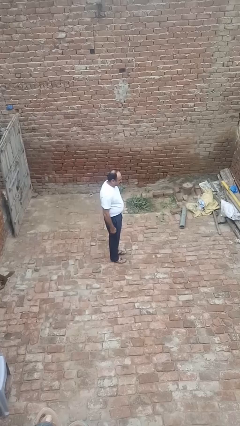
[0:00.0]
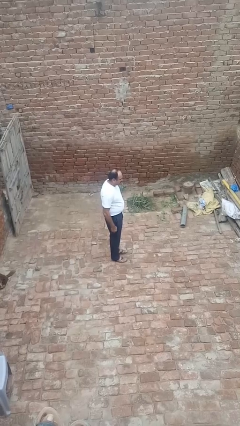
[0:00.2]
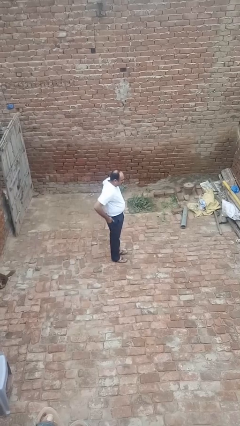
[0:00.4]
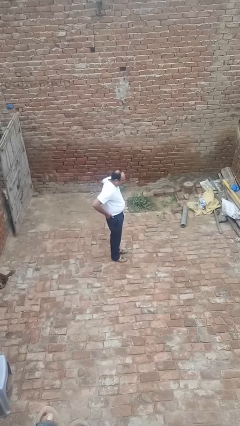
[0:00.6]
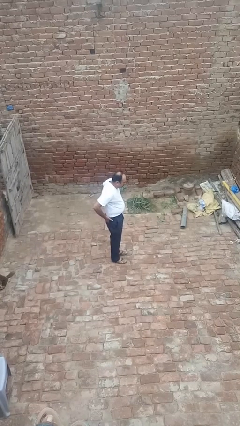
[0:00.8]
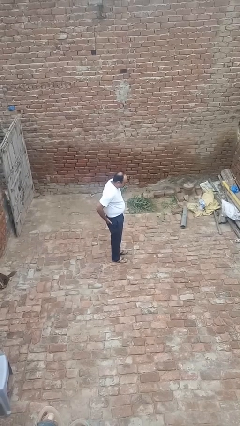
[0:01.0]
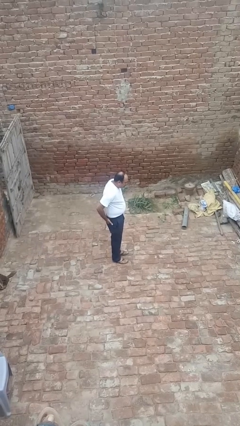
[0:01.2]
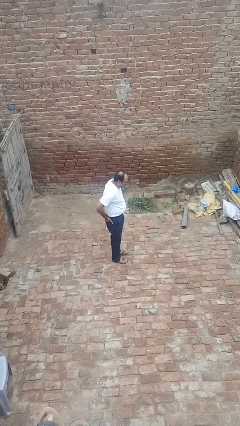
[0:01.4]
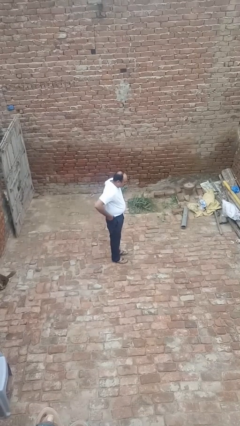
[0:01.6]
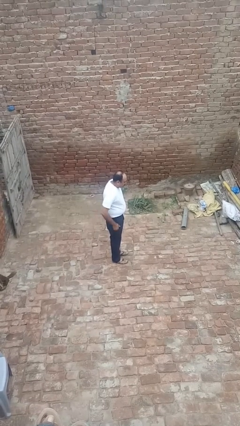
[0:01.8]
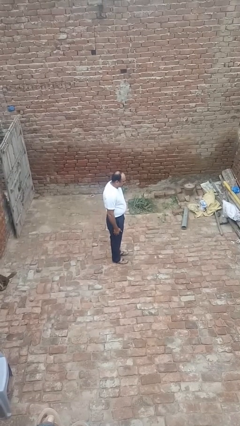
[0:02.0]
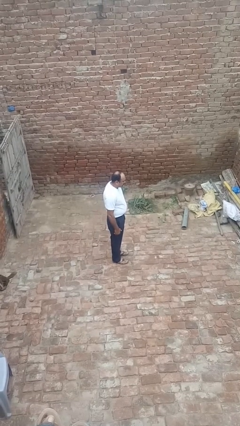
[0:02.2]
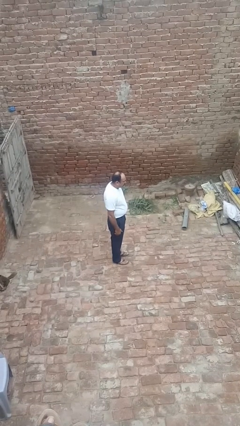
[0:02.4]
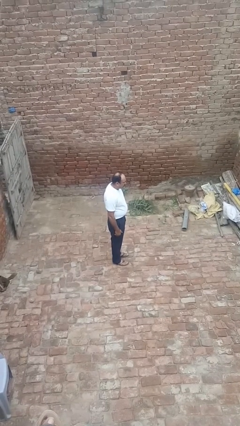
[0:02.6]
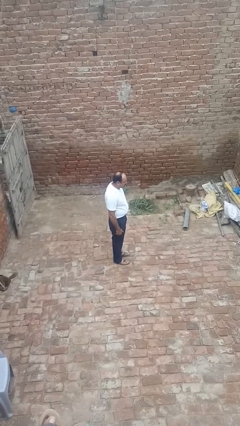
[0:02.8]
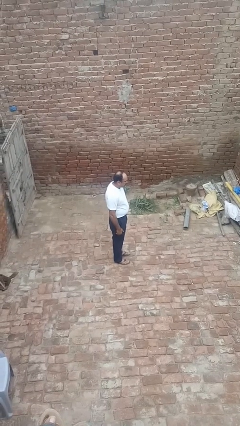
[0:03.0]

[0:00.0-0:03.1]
person puts hands in back pockets

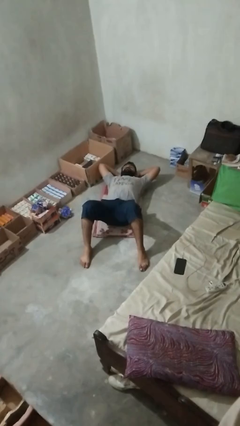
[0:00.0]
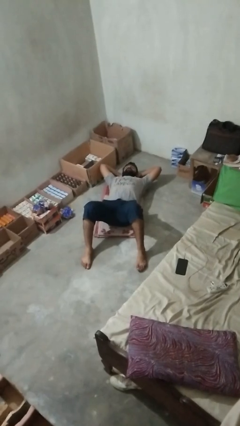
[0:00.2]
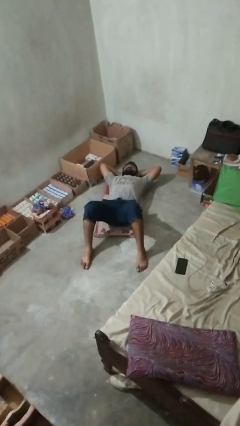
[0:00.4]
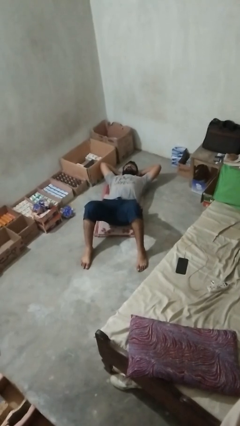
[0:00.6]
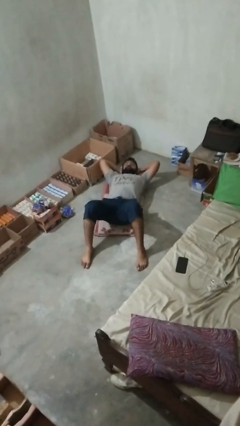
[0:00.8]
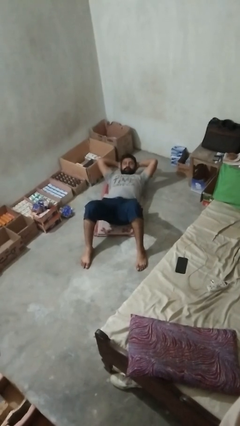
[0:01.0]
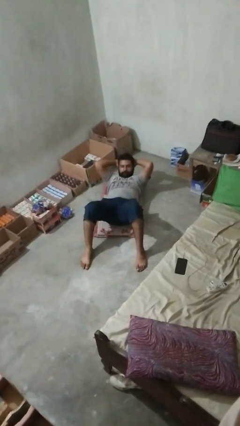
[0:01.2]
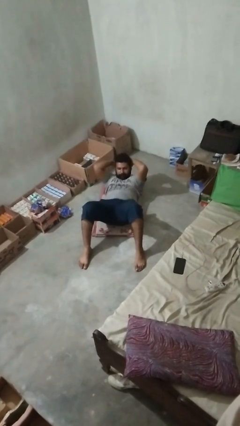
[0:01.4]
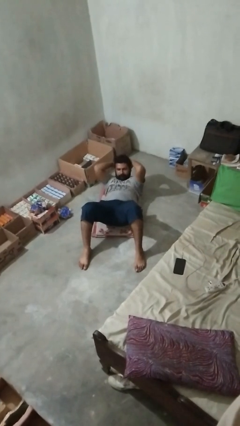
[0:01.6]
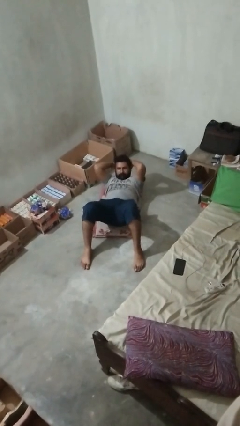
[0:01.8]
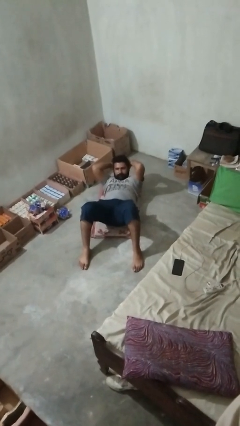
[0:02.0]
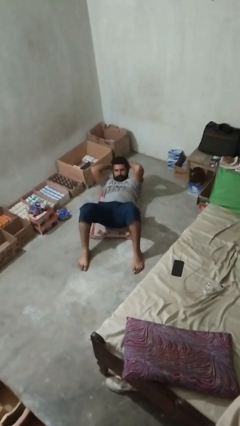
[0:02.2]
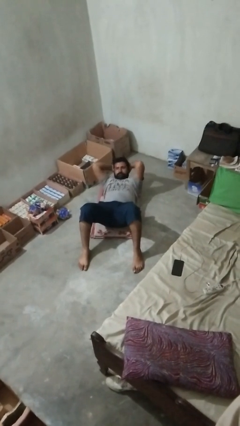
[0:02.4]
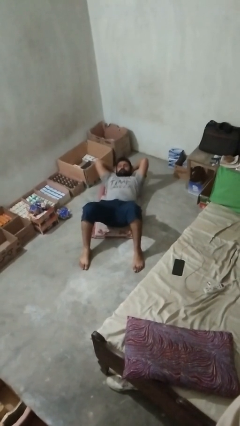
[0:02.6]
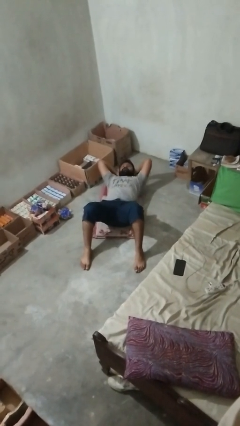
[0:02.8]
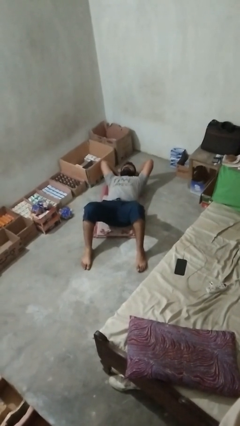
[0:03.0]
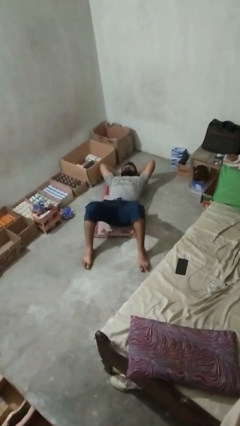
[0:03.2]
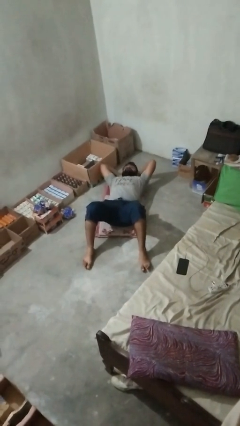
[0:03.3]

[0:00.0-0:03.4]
person exercises with situp

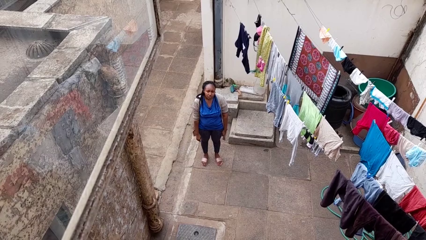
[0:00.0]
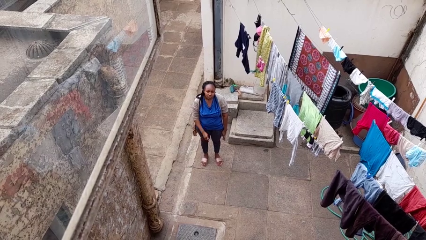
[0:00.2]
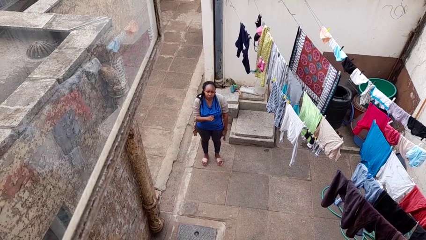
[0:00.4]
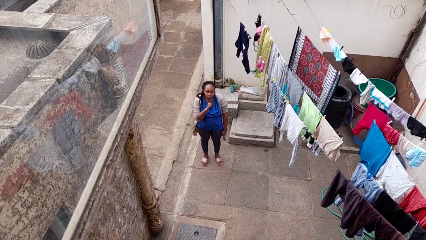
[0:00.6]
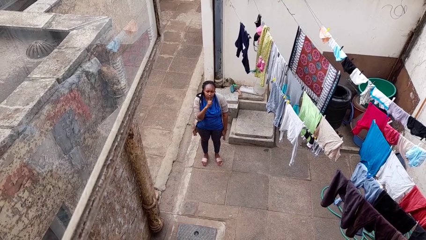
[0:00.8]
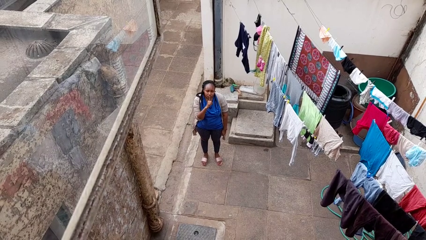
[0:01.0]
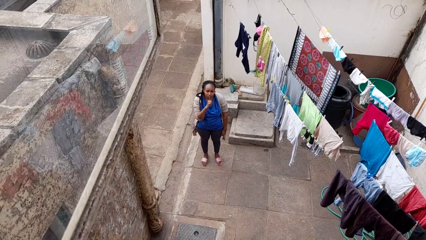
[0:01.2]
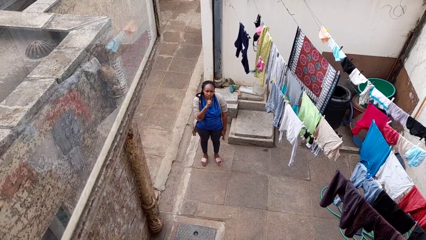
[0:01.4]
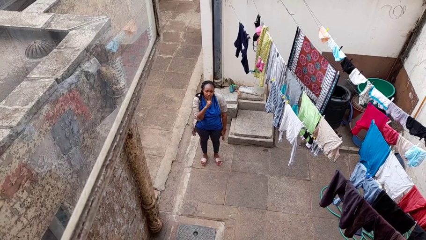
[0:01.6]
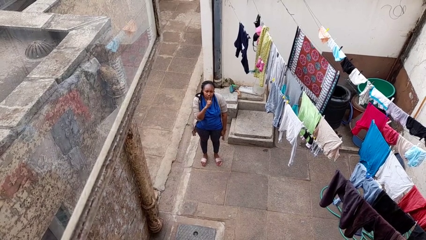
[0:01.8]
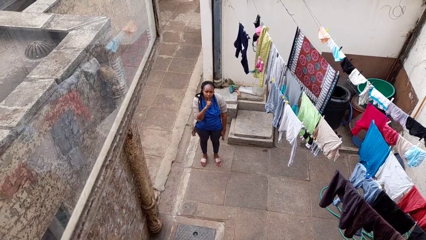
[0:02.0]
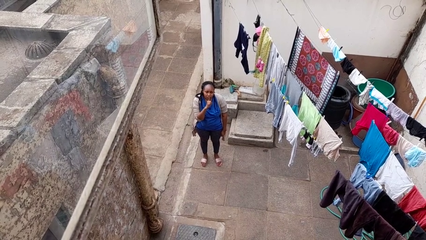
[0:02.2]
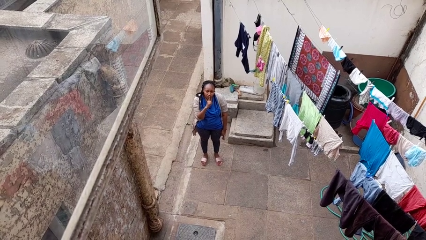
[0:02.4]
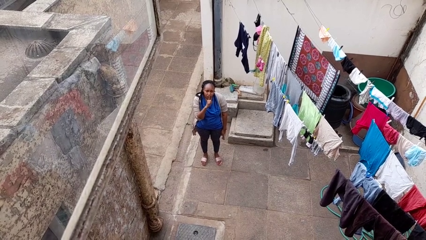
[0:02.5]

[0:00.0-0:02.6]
person gestures be quiet

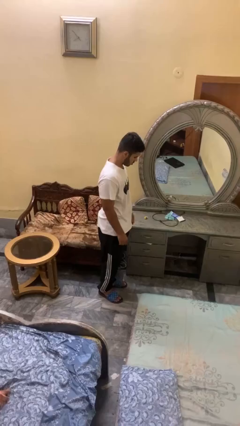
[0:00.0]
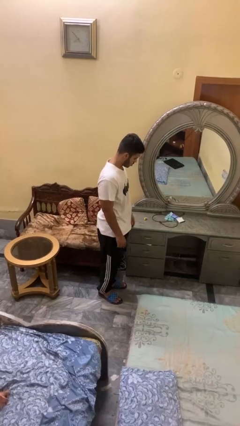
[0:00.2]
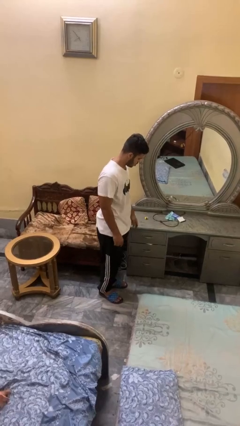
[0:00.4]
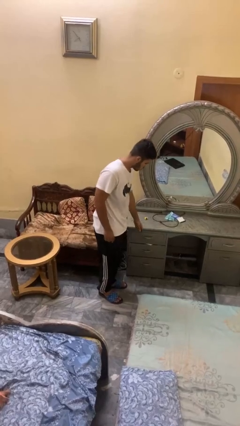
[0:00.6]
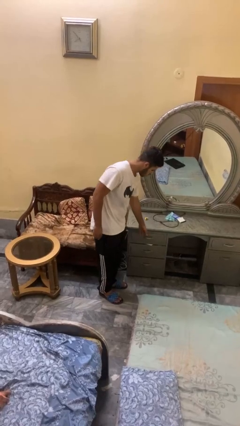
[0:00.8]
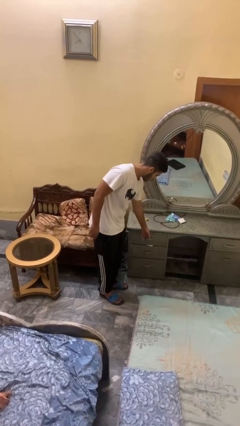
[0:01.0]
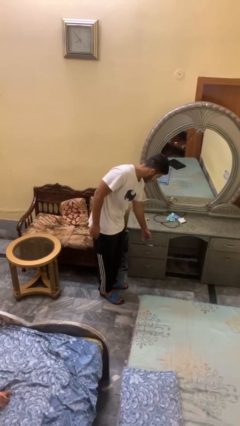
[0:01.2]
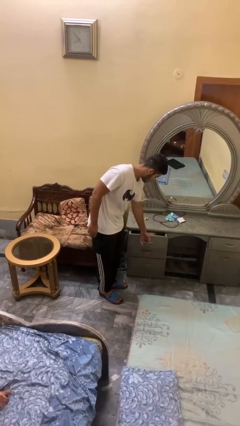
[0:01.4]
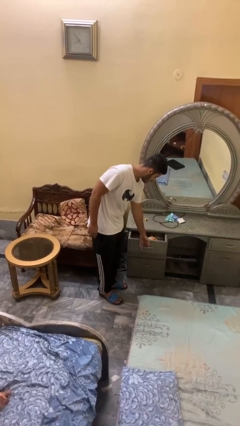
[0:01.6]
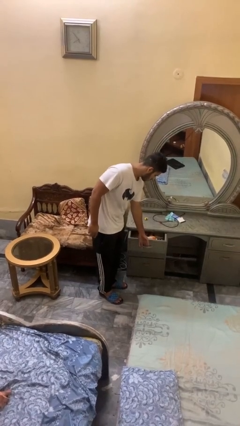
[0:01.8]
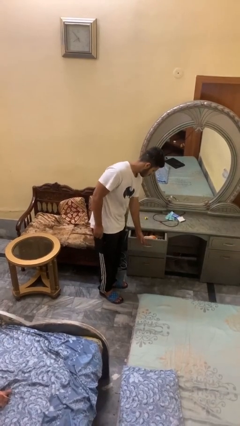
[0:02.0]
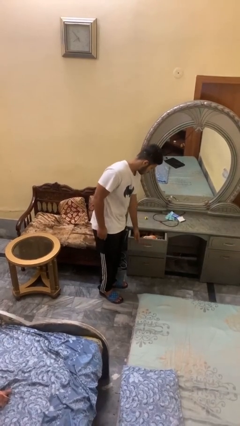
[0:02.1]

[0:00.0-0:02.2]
person opens dresser drawer

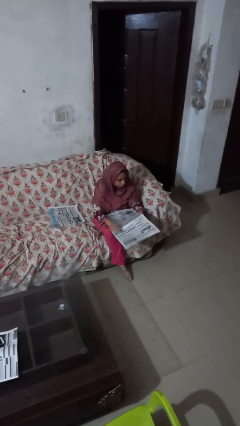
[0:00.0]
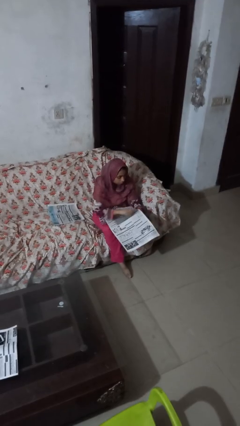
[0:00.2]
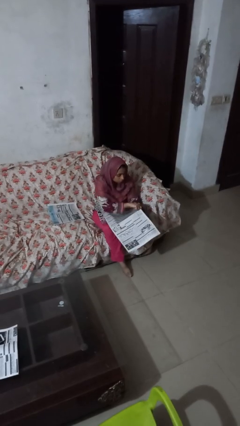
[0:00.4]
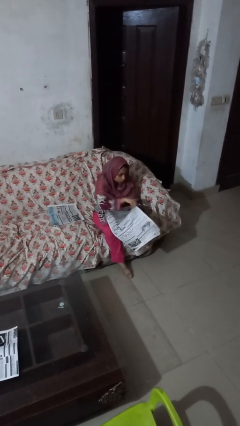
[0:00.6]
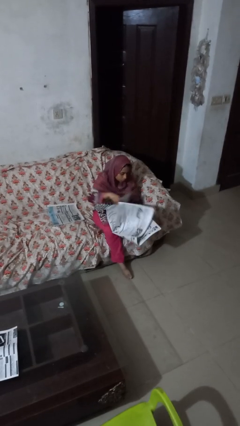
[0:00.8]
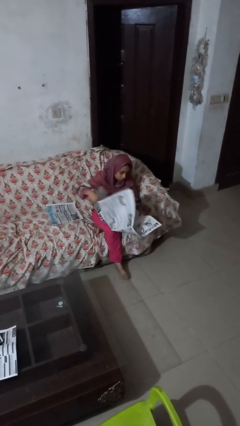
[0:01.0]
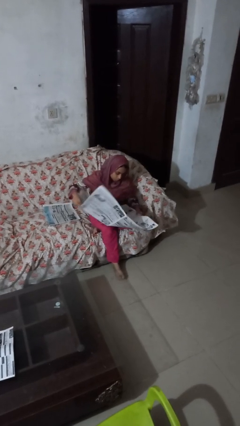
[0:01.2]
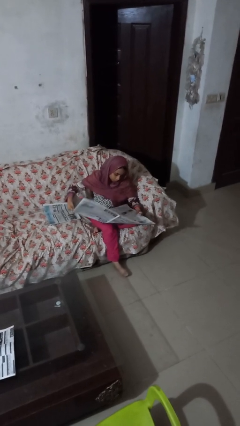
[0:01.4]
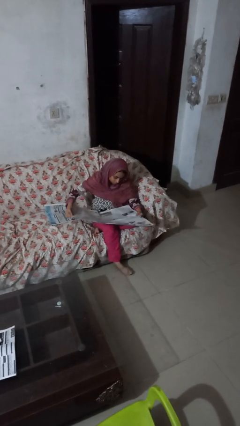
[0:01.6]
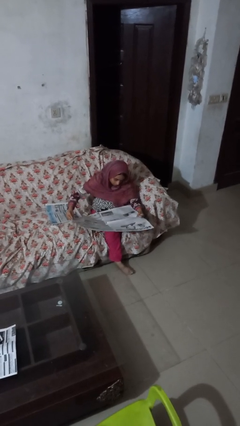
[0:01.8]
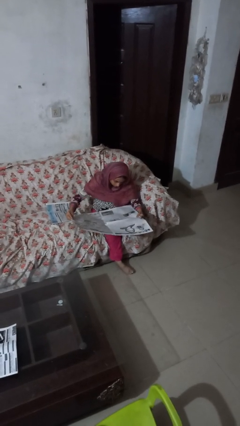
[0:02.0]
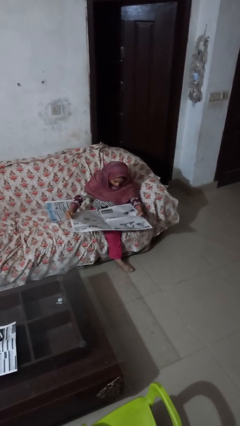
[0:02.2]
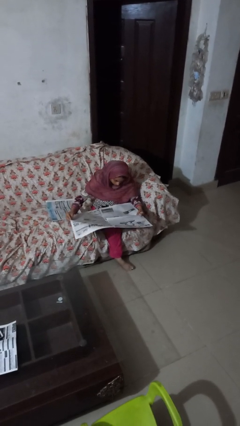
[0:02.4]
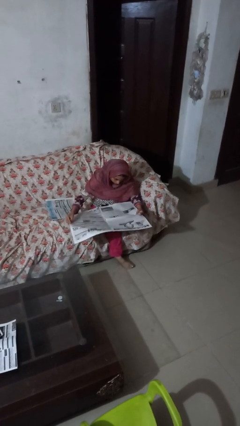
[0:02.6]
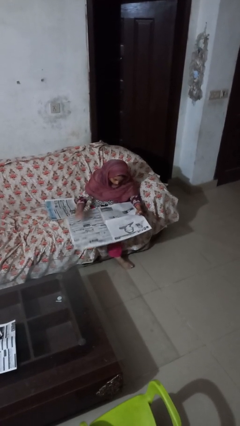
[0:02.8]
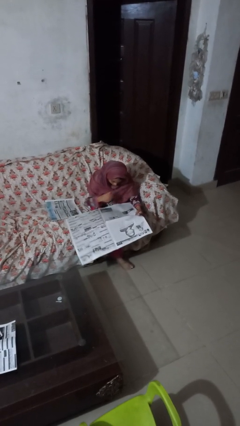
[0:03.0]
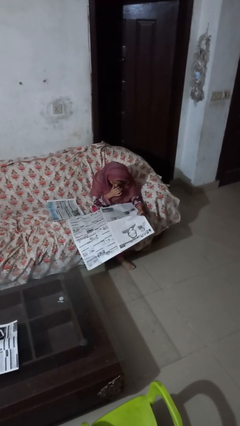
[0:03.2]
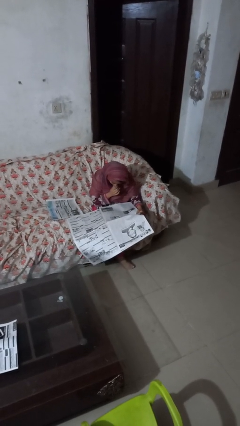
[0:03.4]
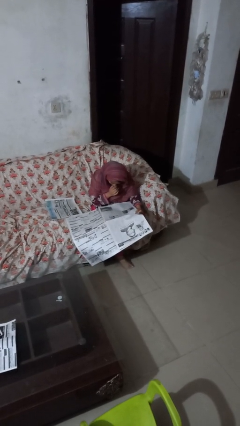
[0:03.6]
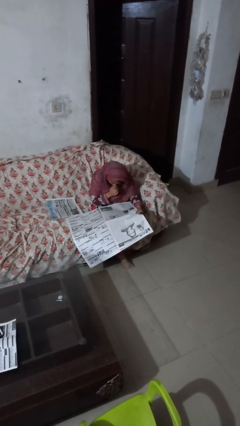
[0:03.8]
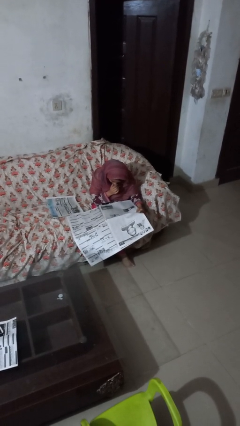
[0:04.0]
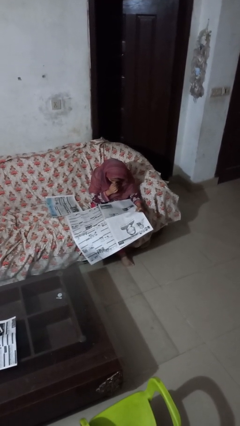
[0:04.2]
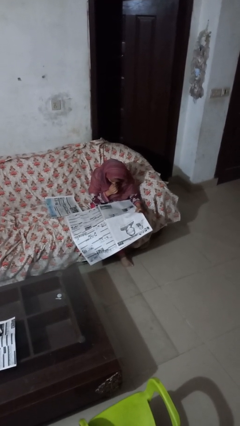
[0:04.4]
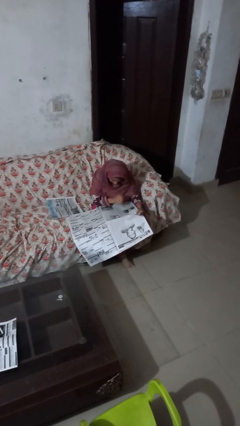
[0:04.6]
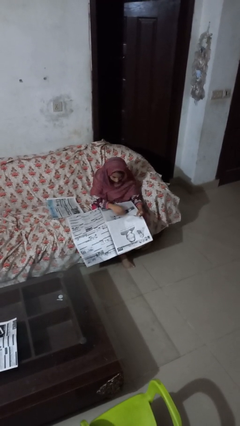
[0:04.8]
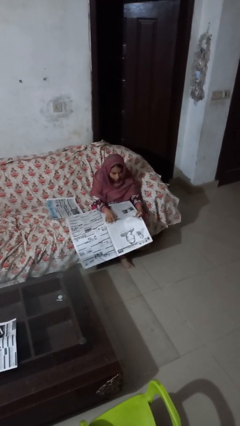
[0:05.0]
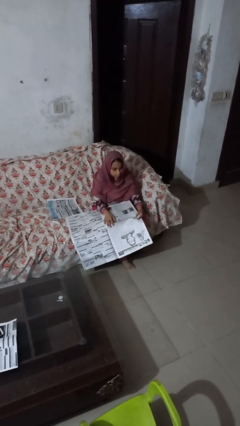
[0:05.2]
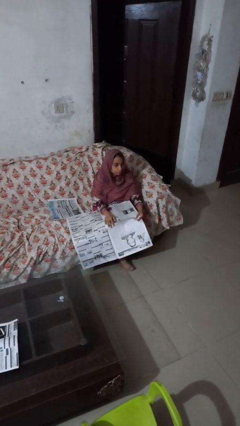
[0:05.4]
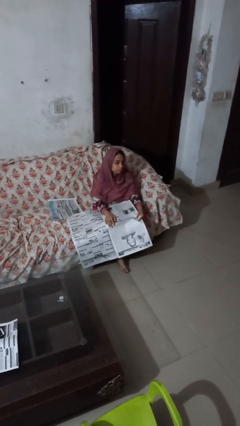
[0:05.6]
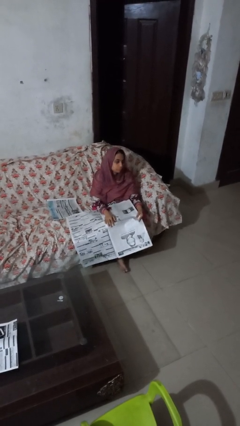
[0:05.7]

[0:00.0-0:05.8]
person reads newspaper

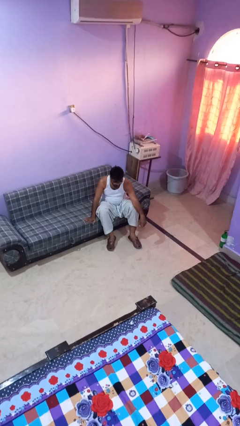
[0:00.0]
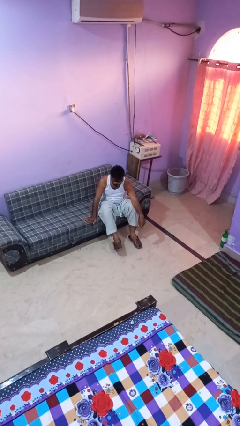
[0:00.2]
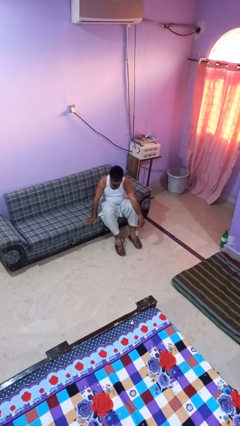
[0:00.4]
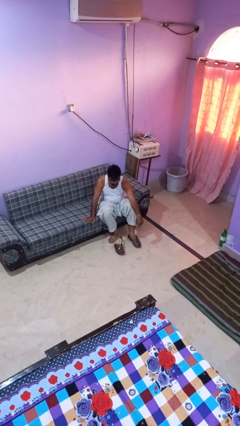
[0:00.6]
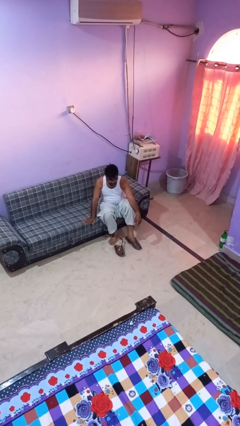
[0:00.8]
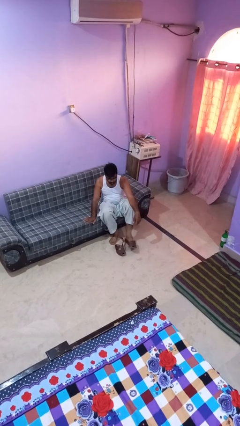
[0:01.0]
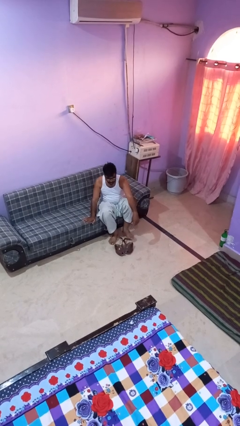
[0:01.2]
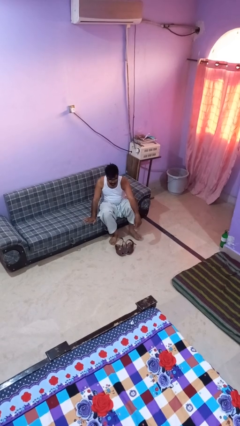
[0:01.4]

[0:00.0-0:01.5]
person takes off shoes
